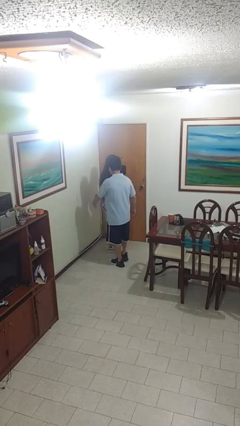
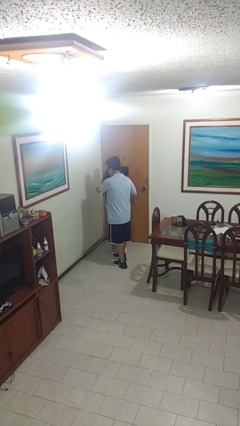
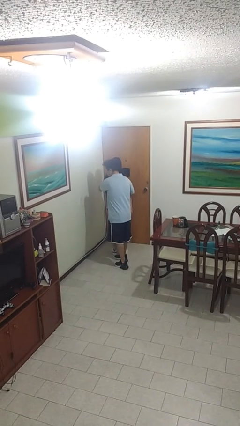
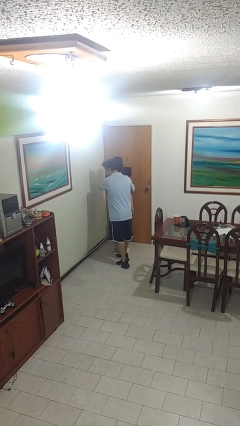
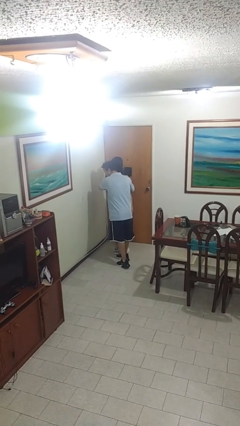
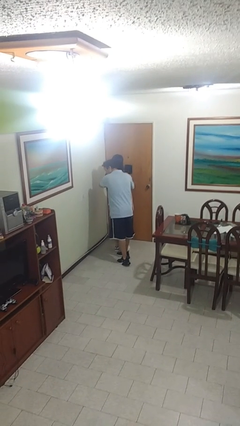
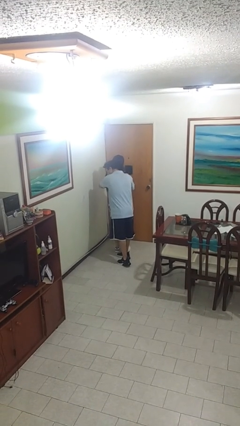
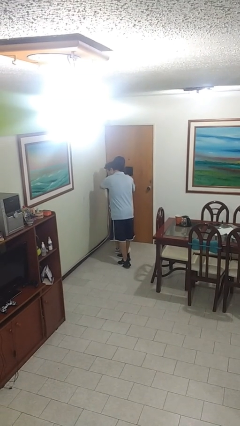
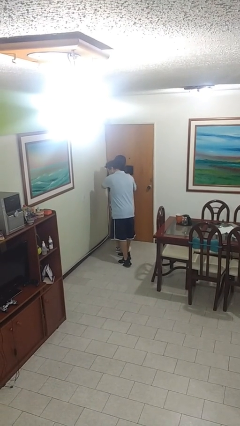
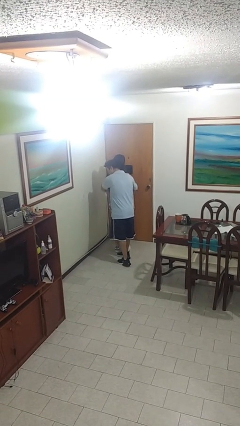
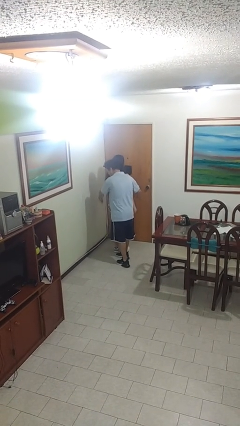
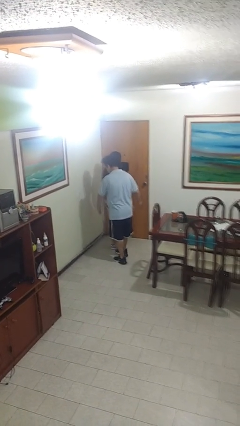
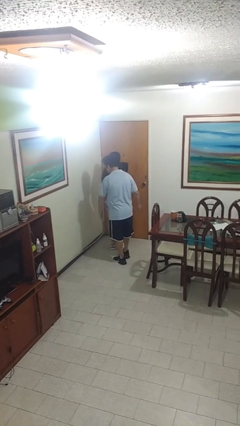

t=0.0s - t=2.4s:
person hugs person from behind

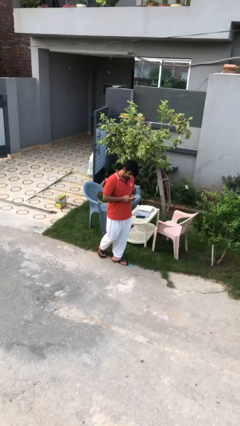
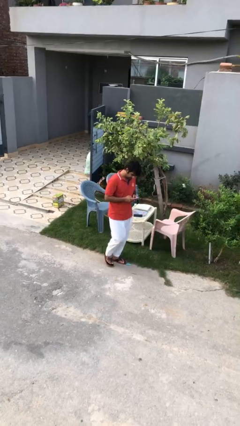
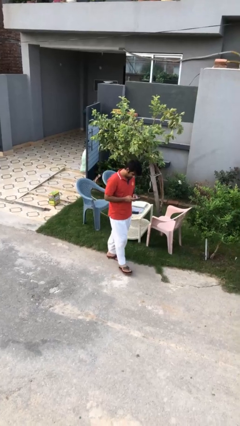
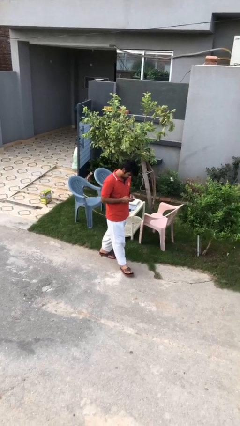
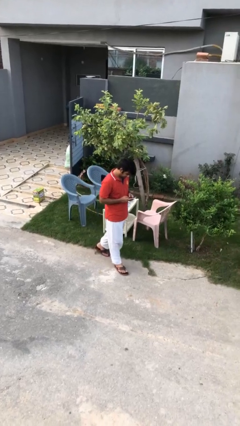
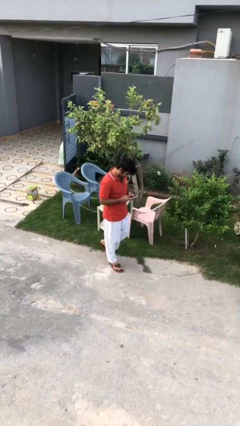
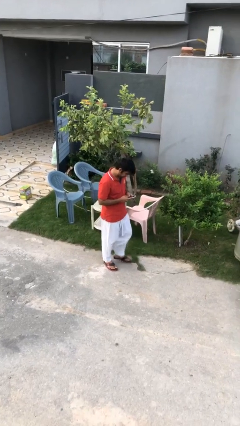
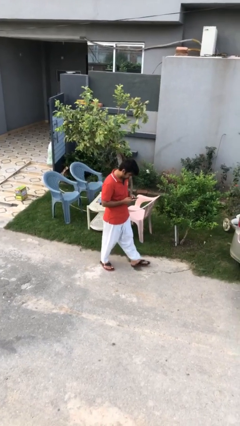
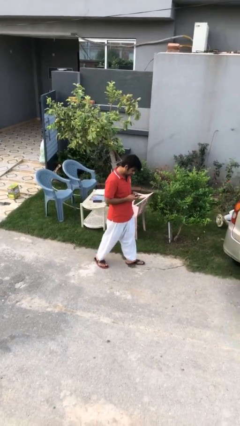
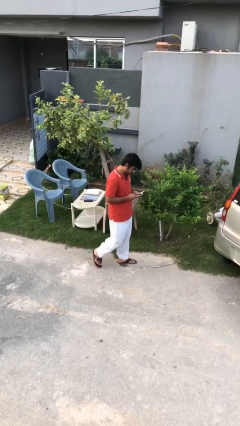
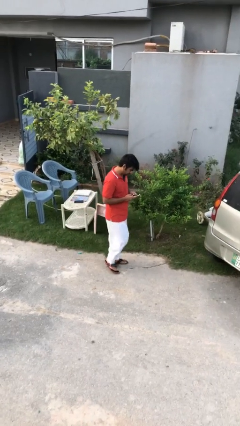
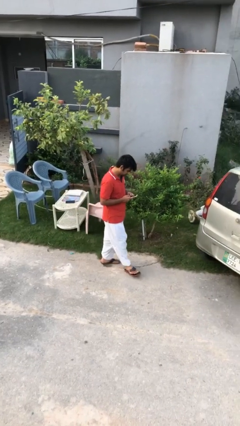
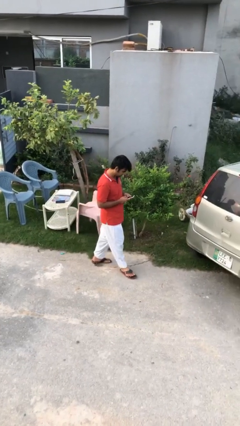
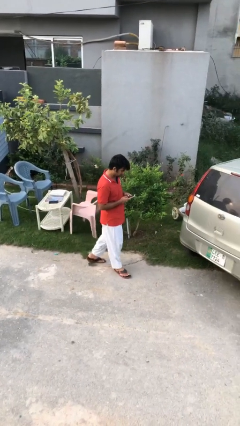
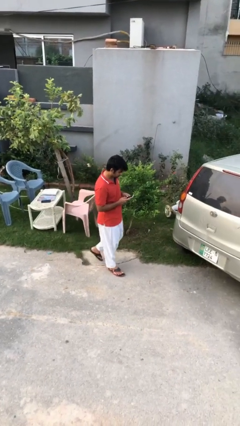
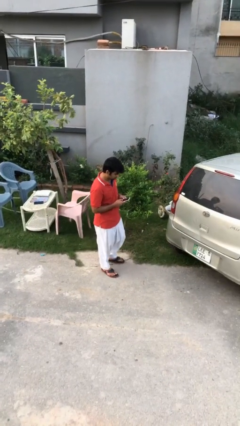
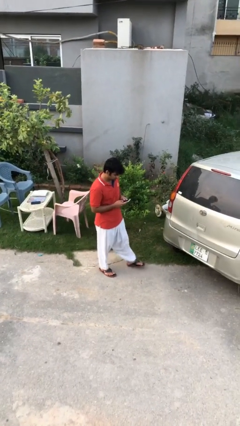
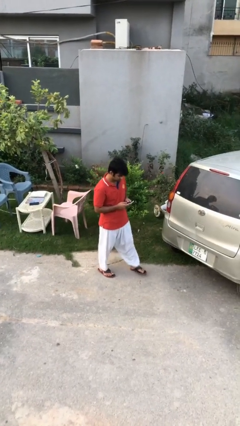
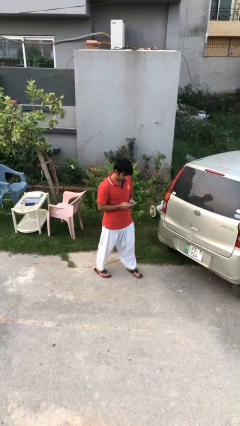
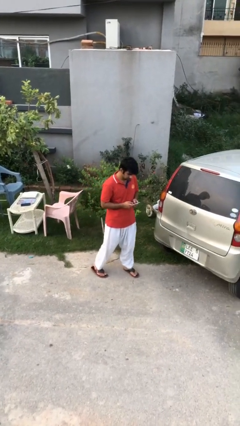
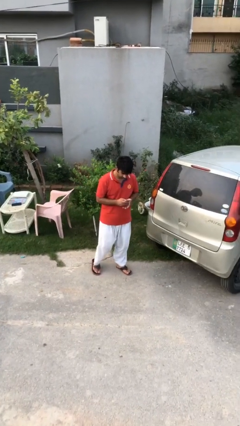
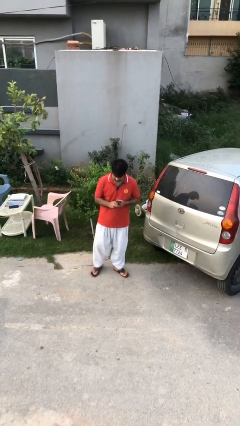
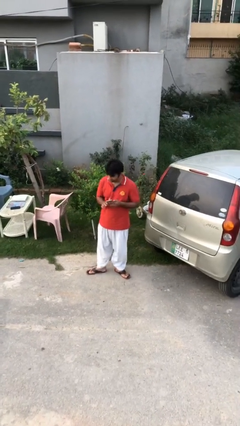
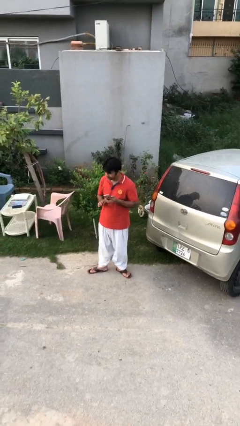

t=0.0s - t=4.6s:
person texts on phone

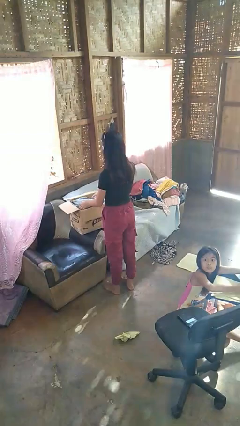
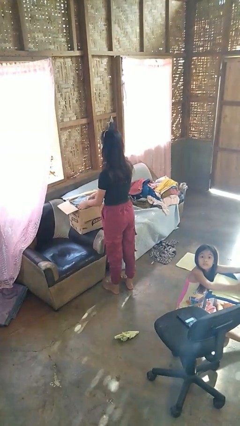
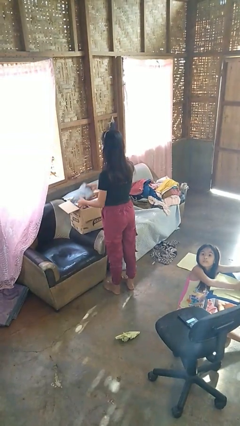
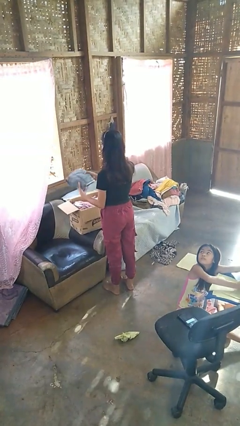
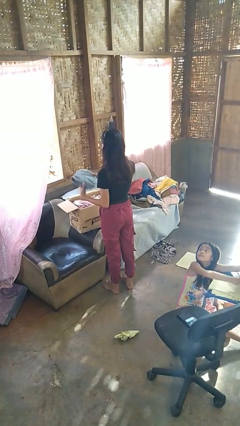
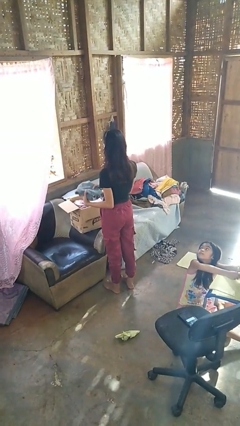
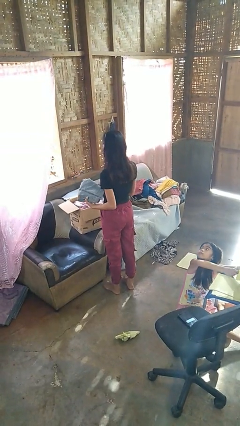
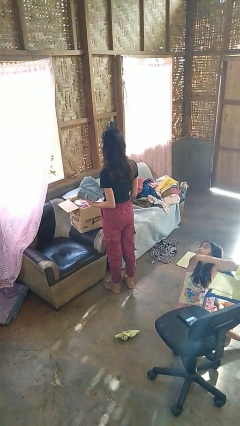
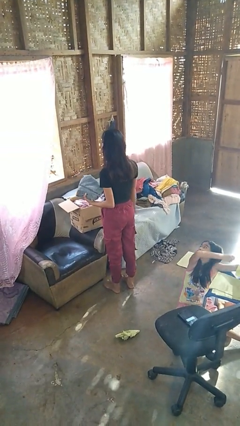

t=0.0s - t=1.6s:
person takes object from box

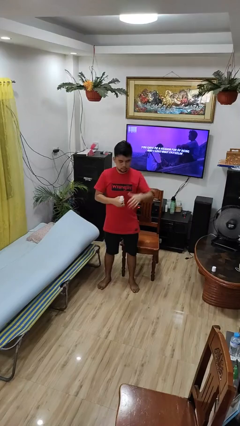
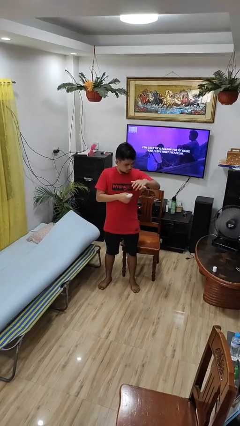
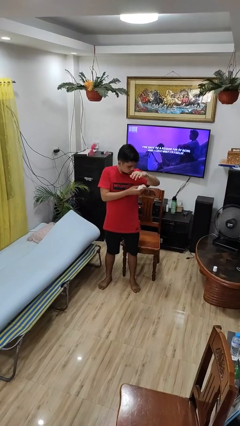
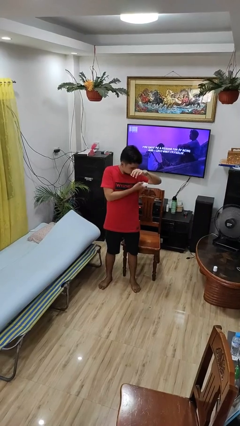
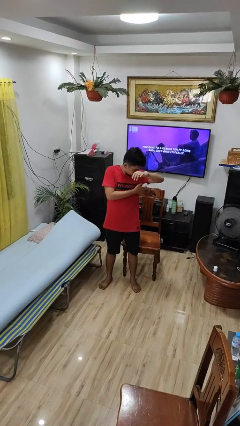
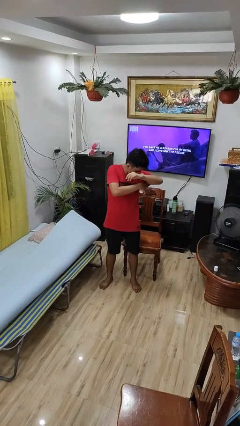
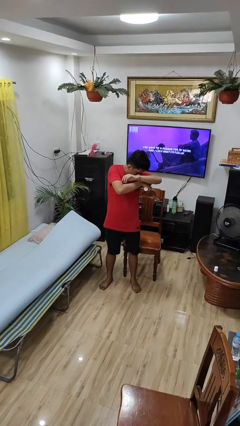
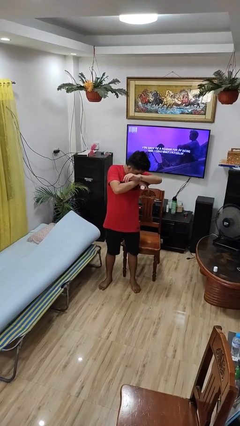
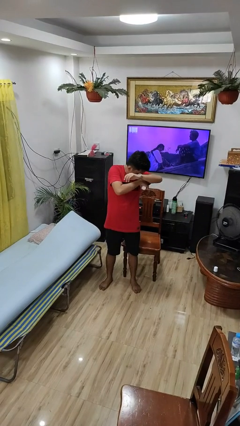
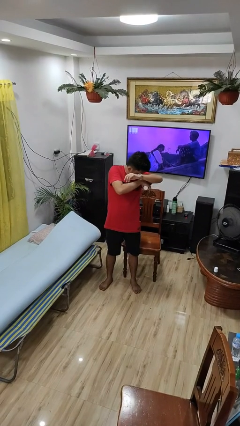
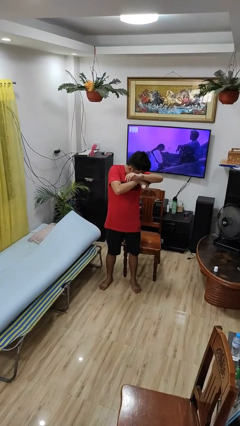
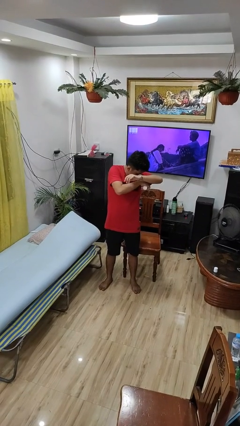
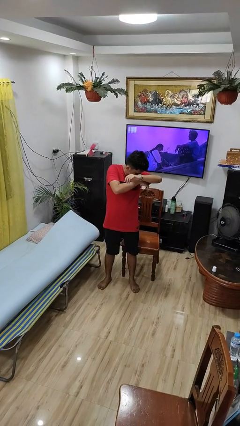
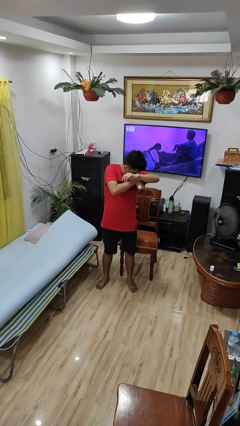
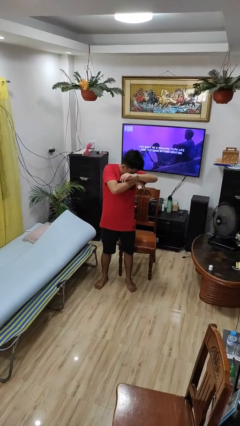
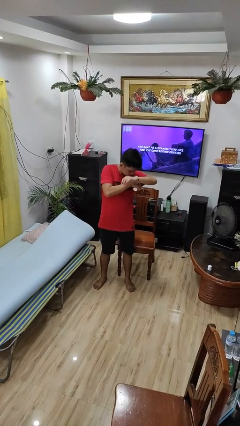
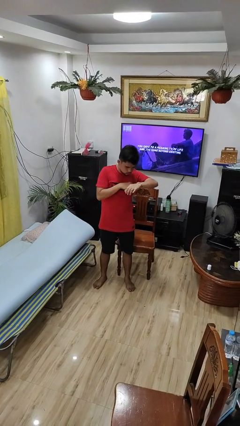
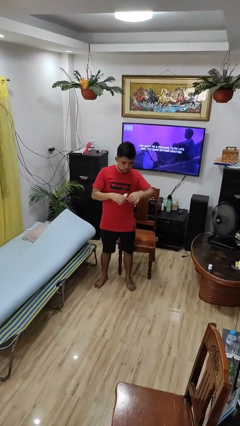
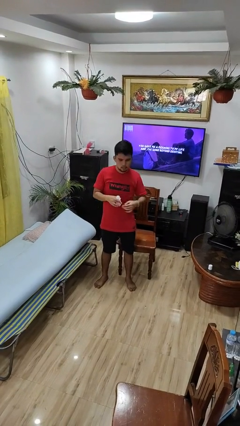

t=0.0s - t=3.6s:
person applies deodorant

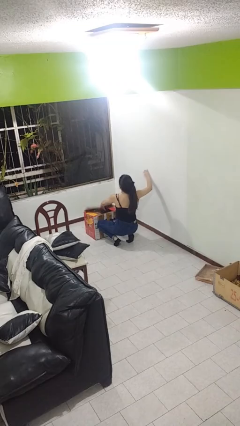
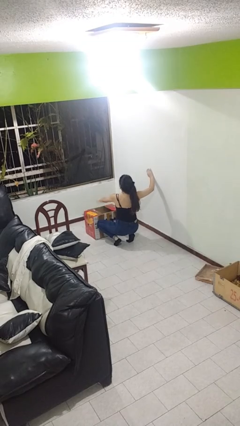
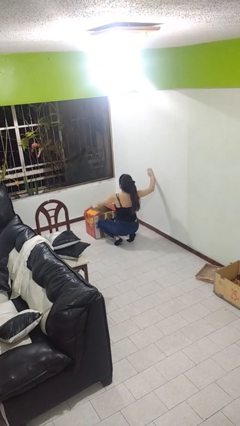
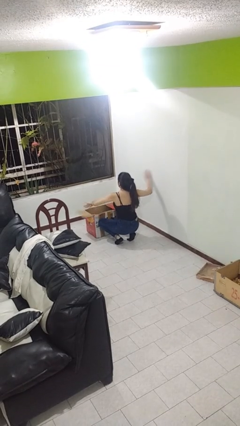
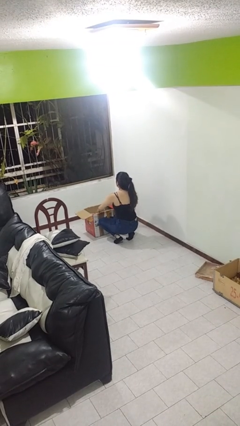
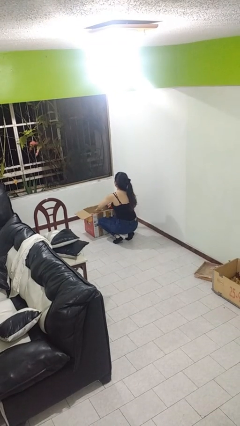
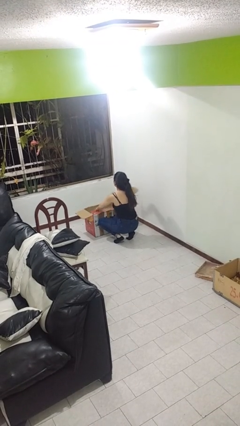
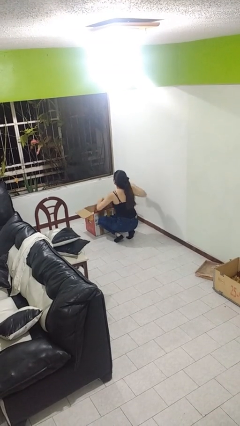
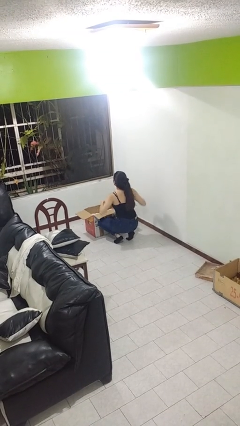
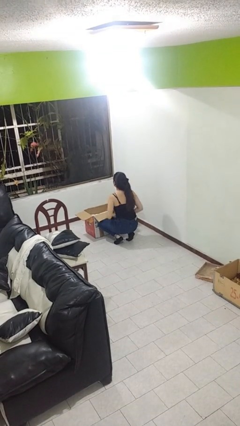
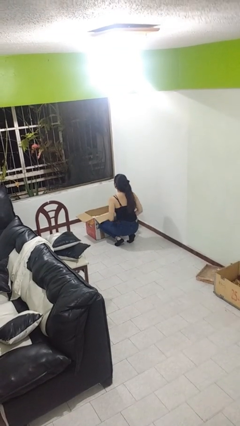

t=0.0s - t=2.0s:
person opens box

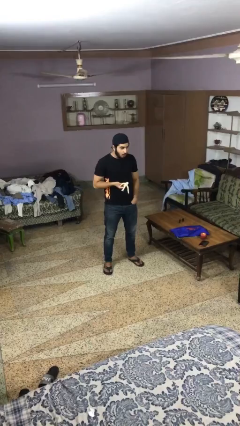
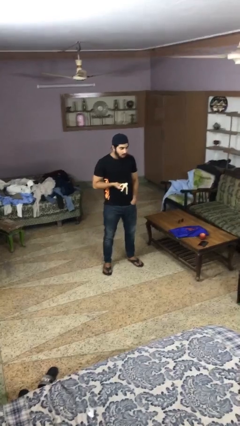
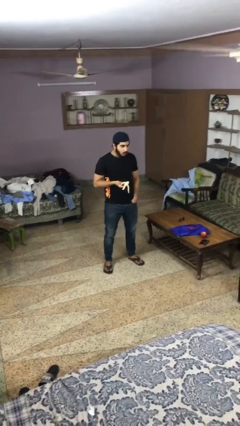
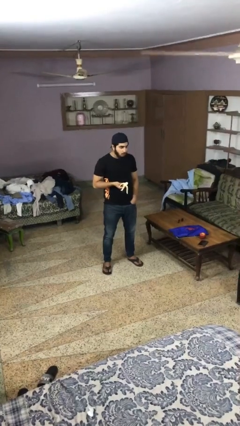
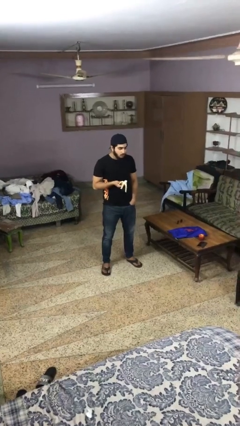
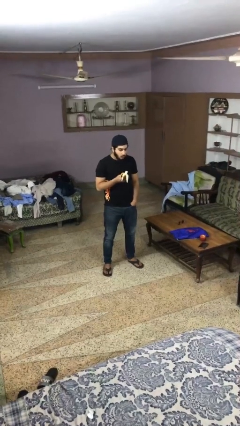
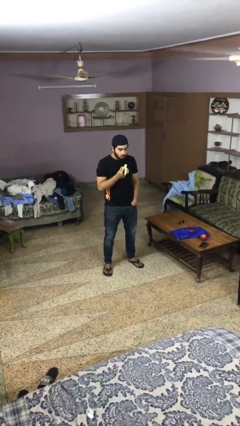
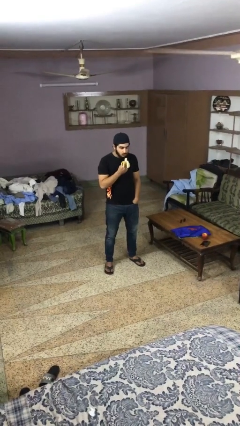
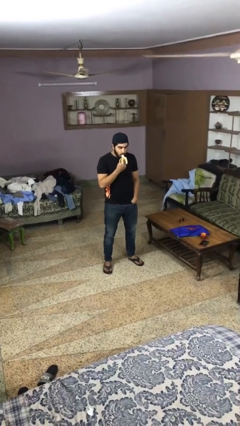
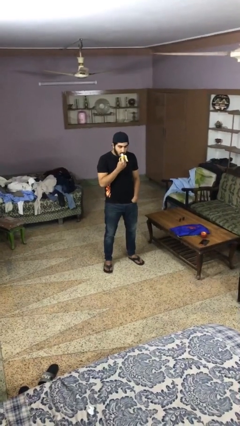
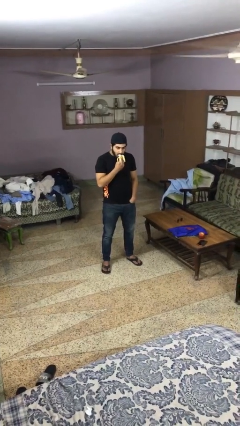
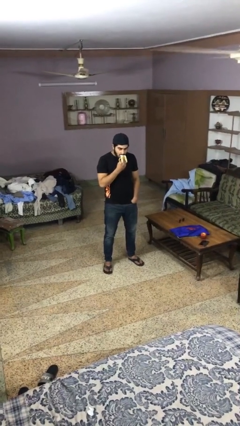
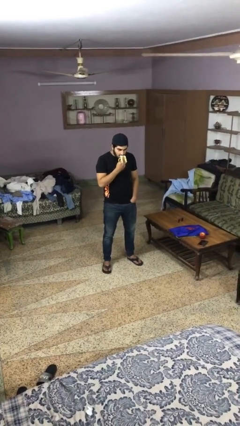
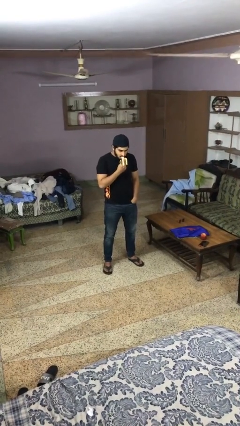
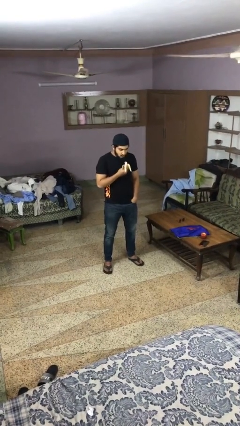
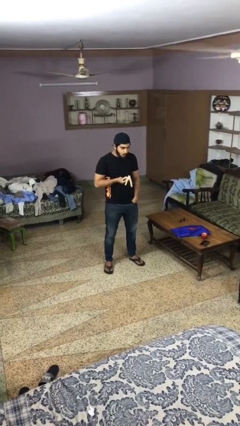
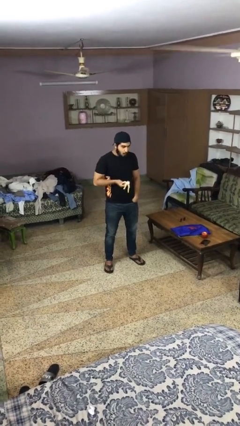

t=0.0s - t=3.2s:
person eats banana
